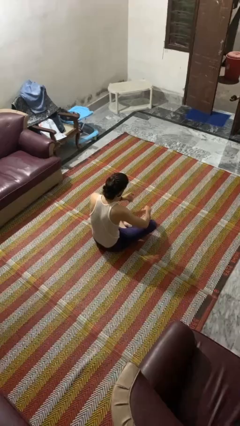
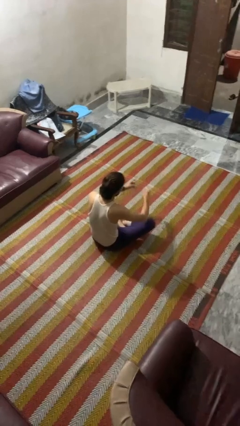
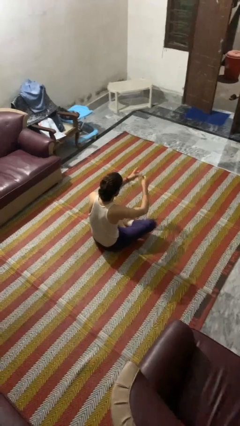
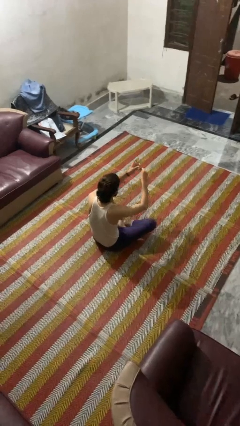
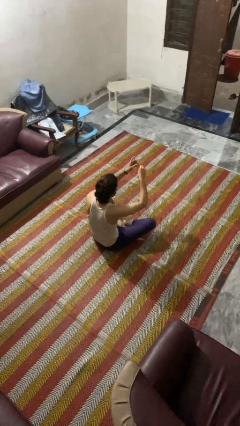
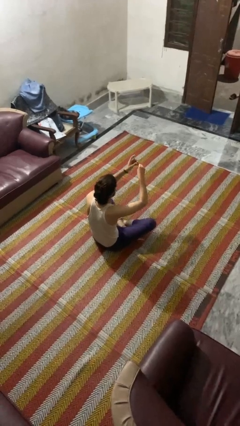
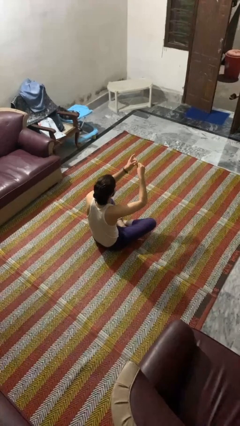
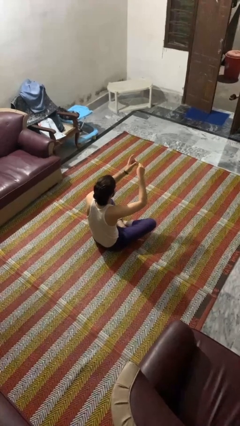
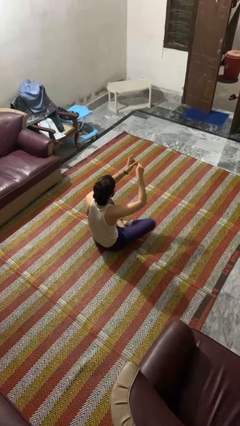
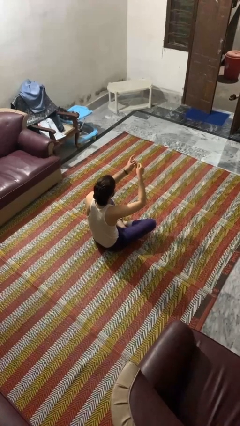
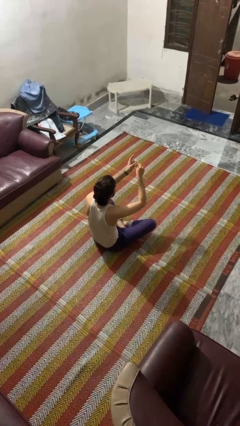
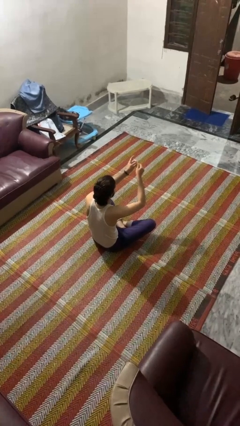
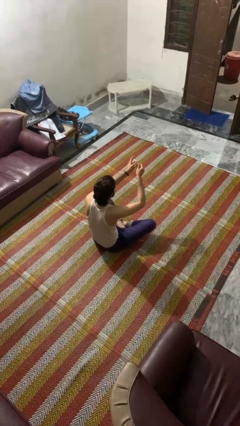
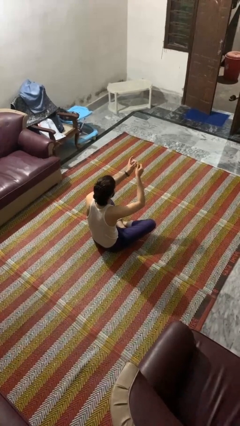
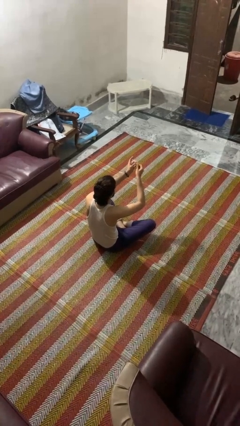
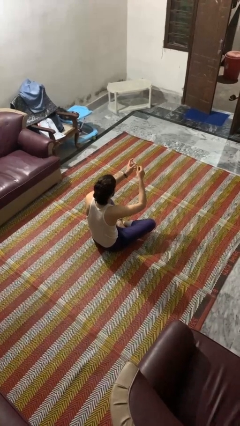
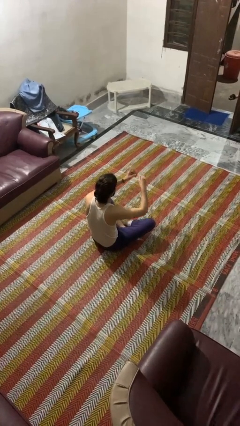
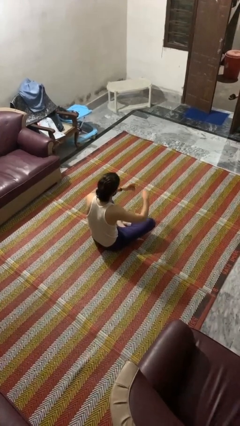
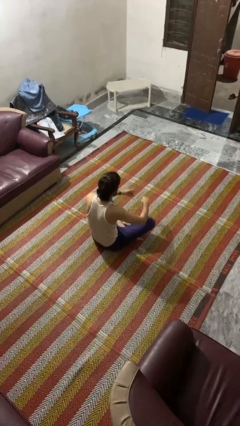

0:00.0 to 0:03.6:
person clips fingernails

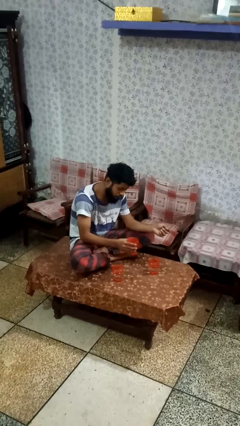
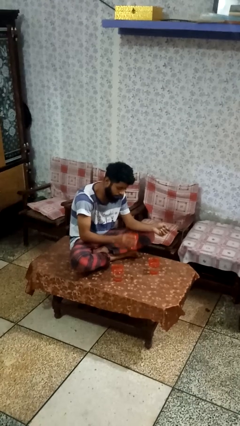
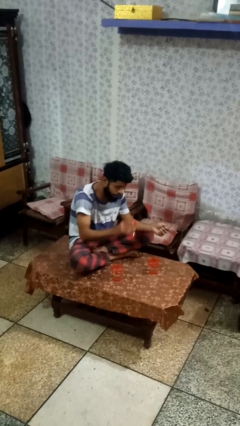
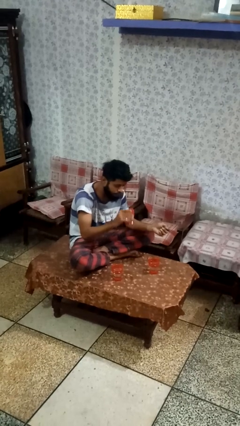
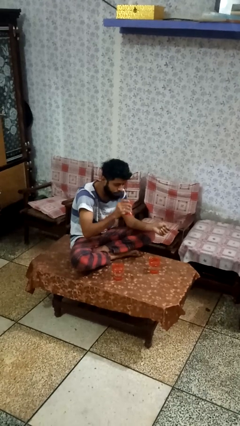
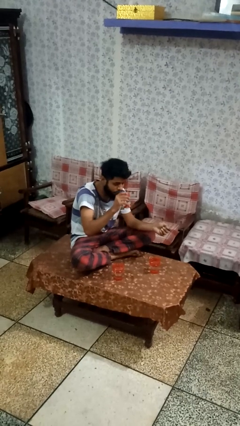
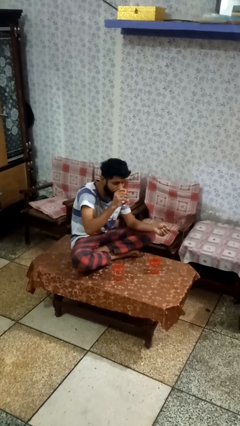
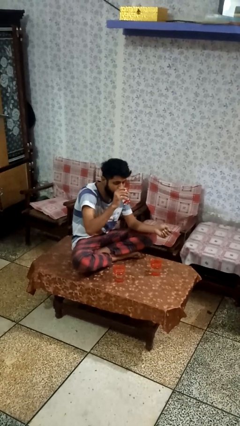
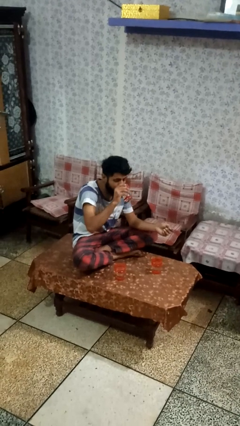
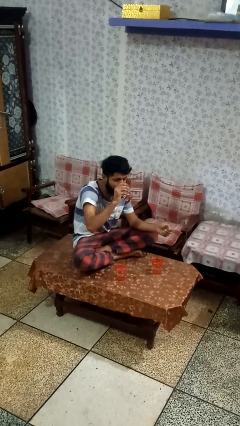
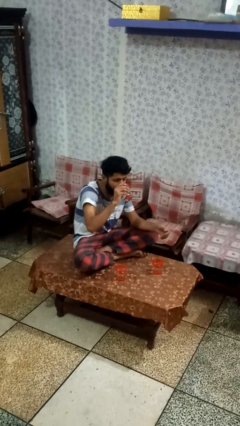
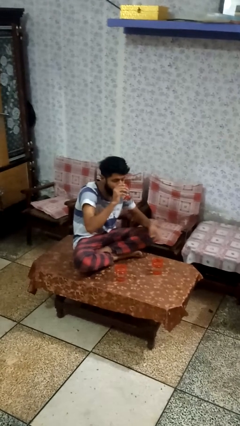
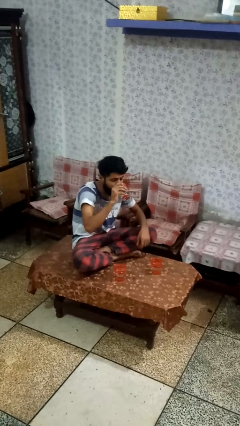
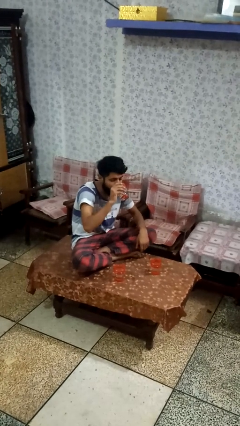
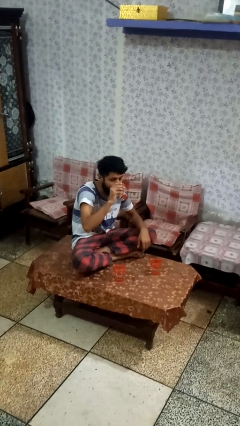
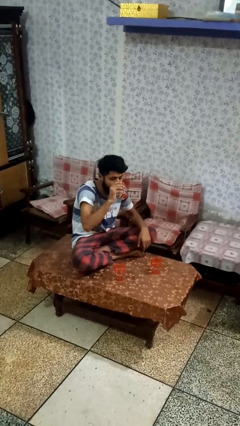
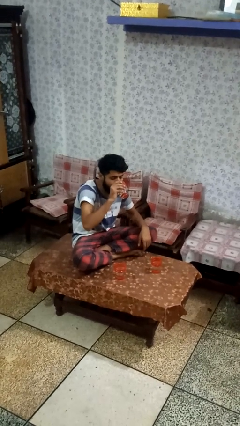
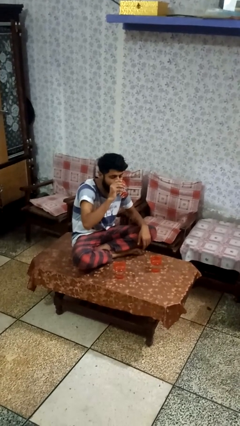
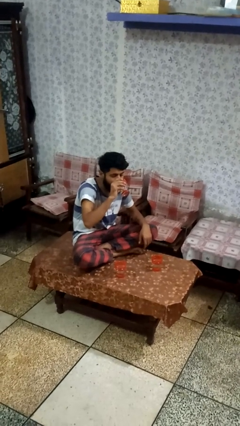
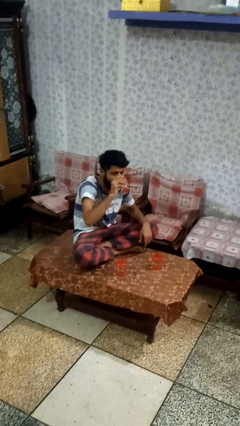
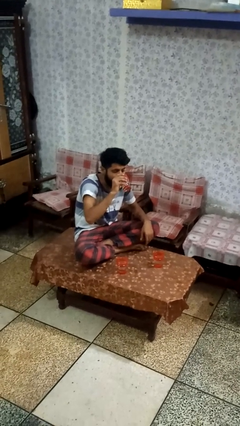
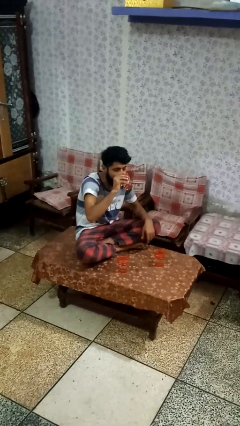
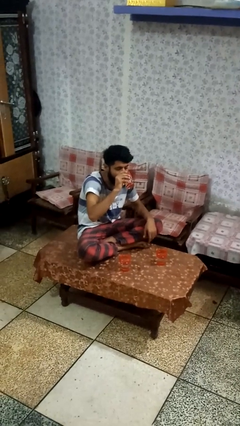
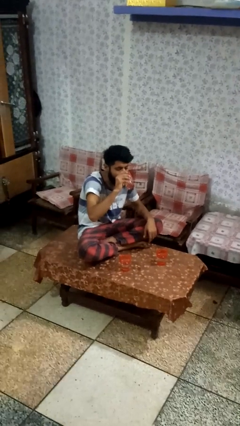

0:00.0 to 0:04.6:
person drinks from shotglass

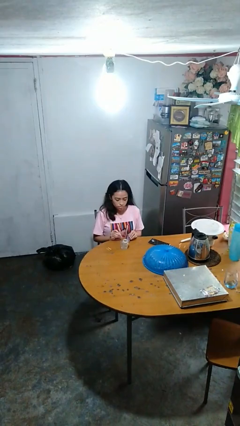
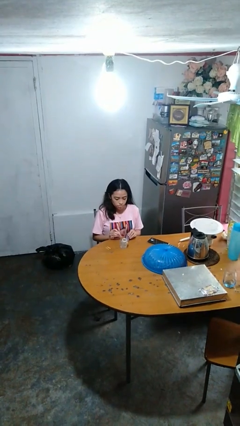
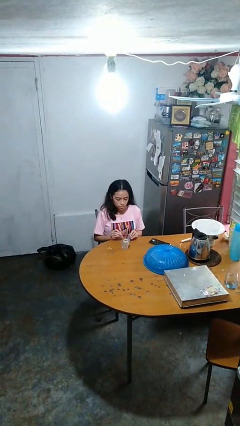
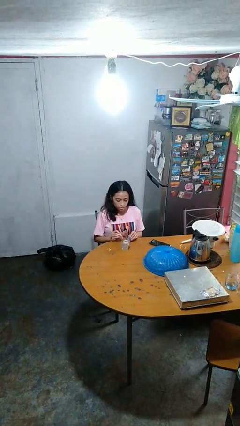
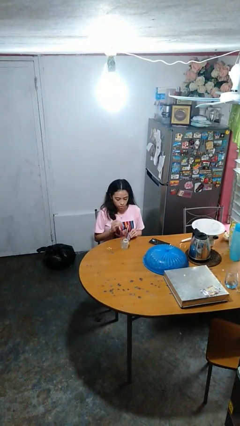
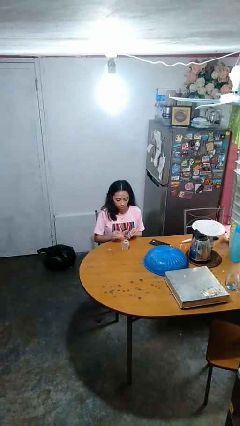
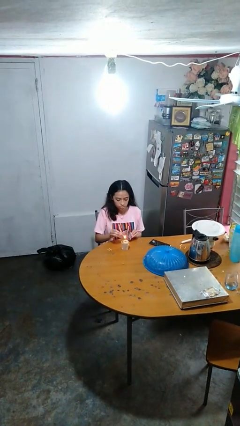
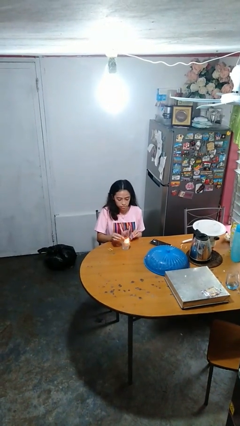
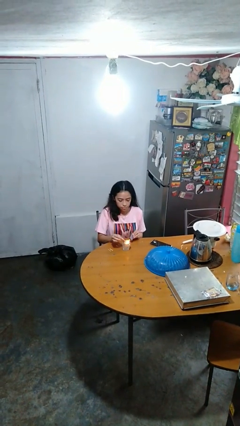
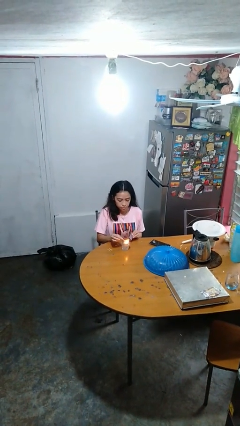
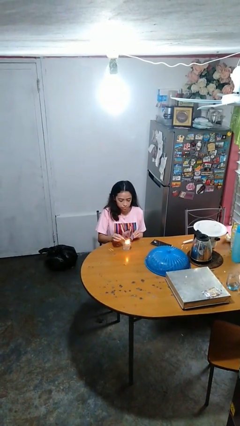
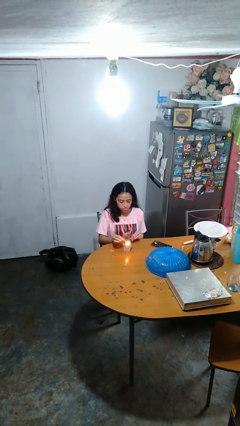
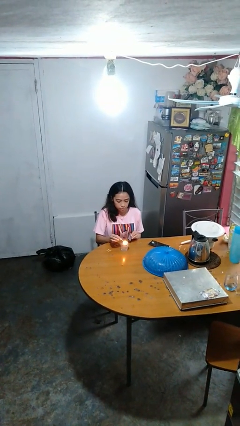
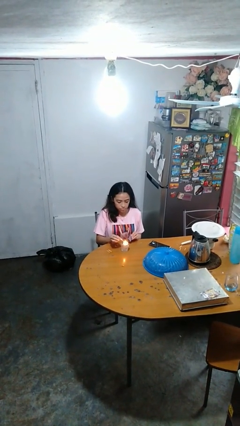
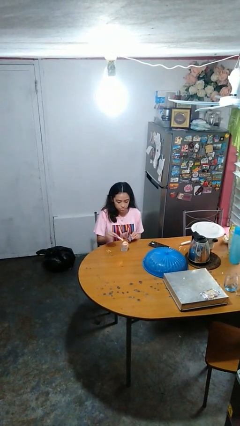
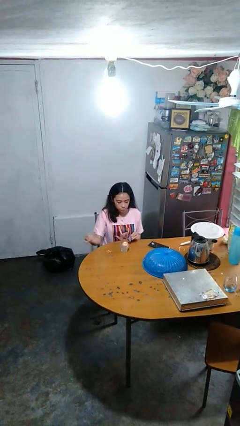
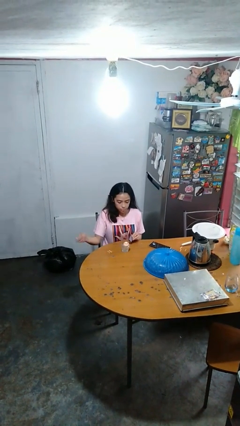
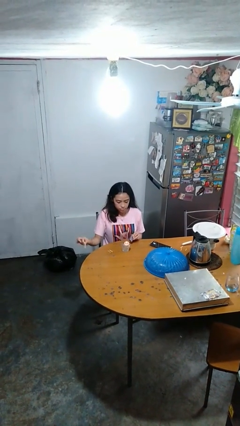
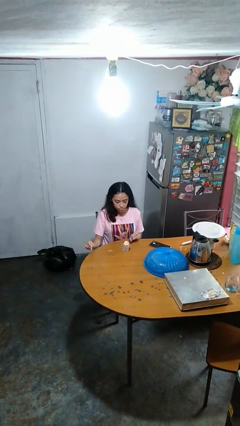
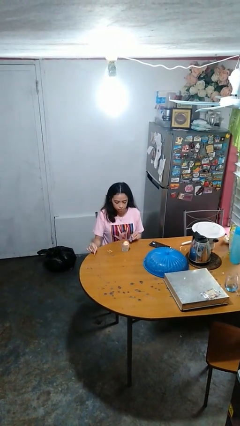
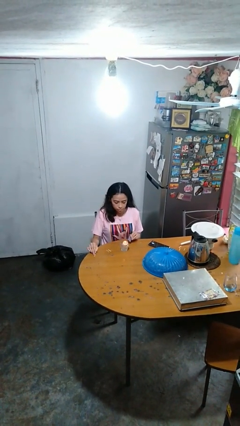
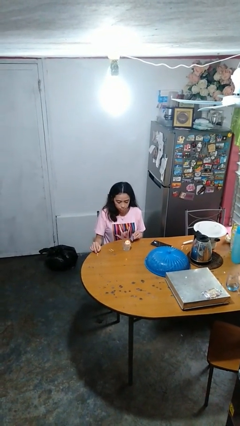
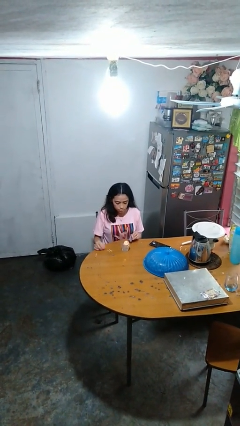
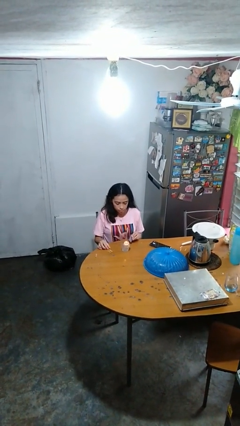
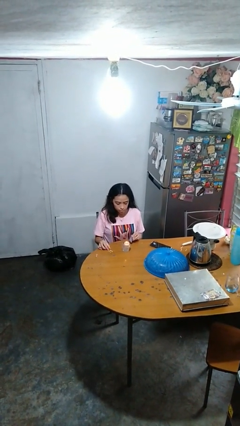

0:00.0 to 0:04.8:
person lights candle

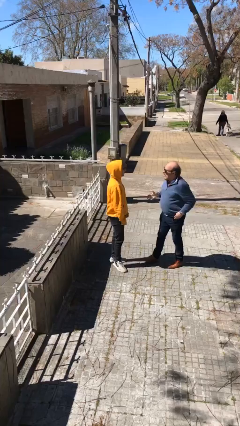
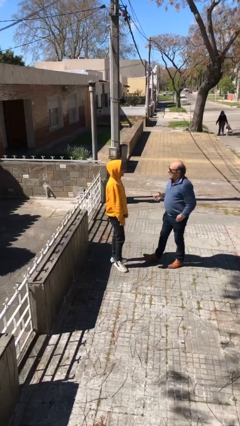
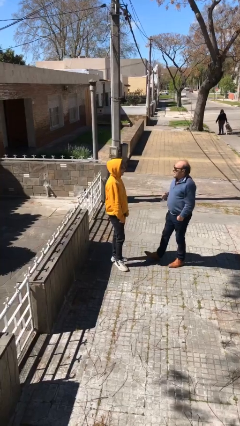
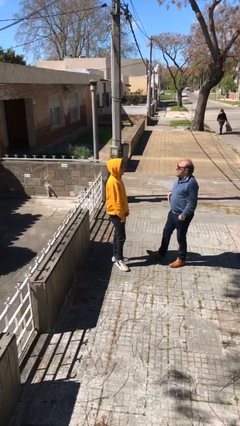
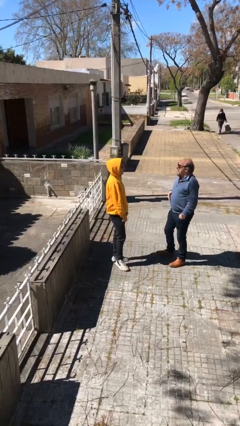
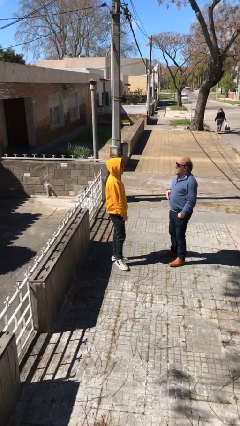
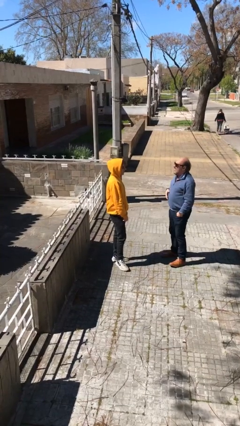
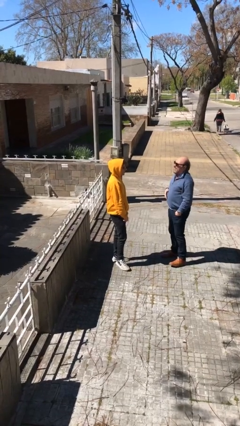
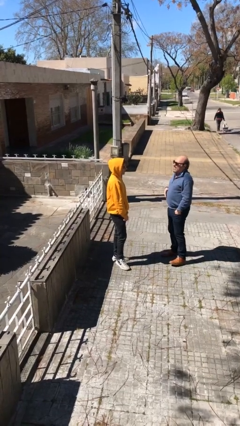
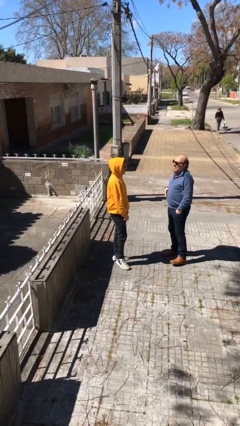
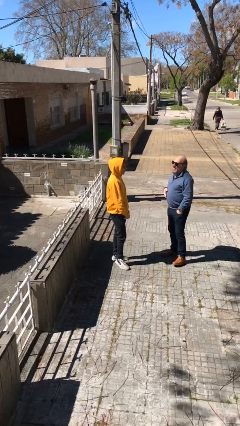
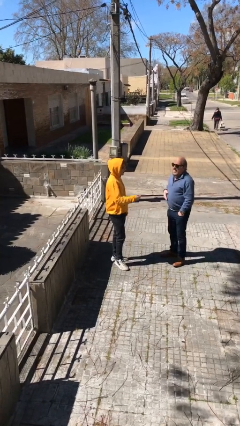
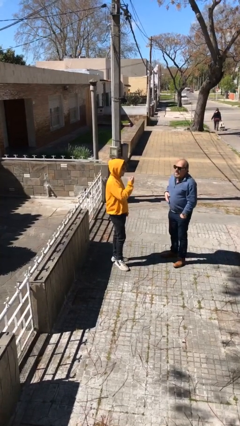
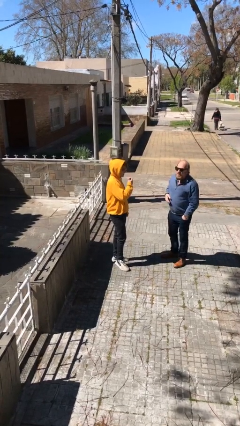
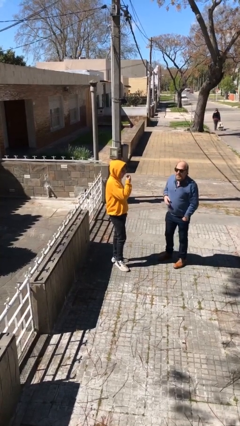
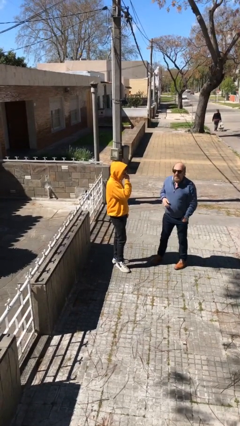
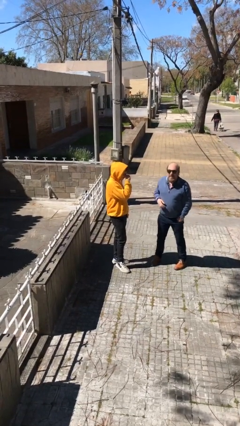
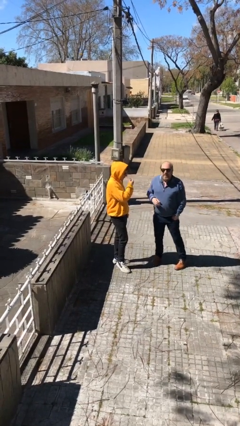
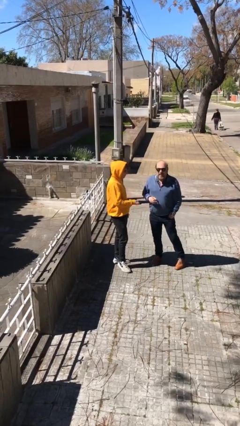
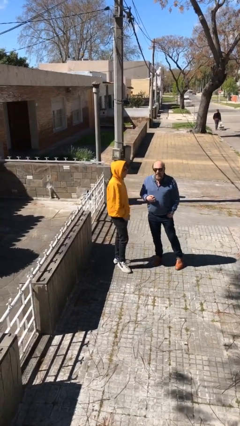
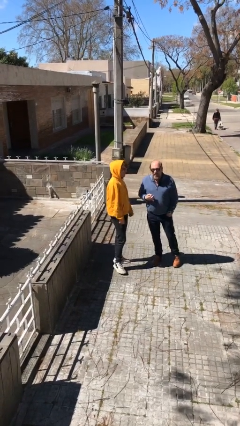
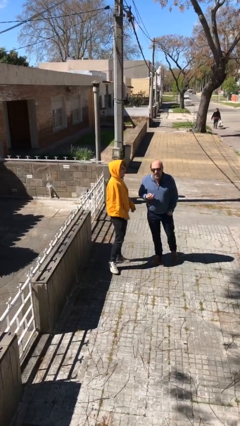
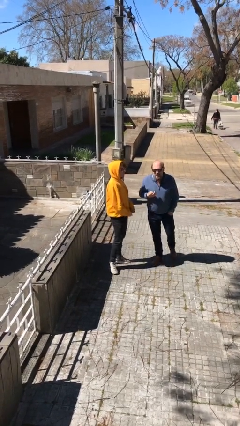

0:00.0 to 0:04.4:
person talks to person
